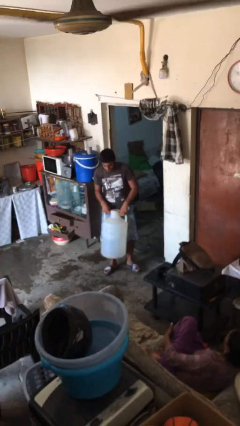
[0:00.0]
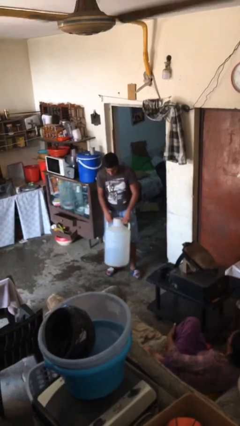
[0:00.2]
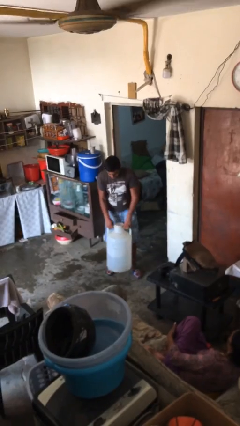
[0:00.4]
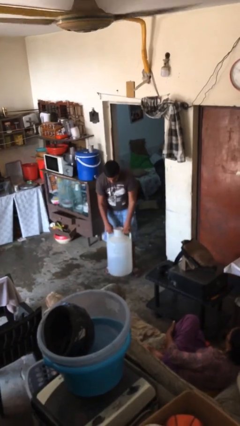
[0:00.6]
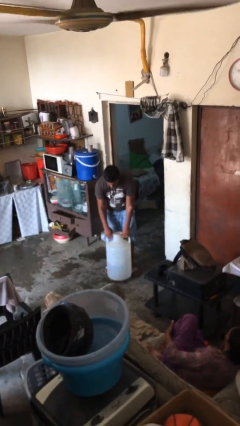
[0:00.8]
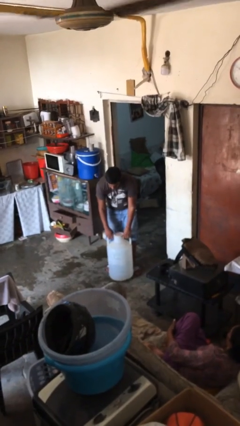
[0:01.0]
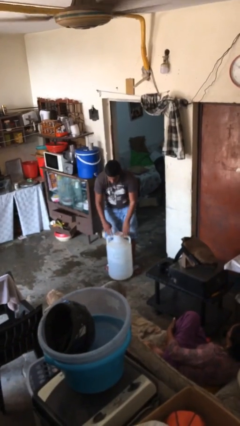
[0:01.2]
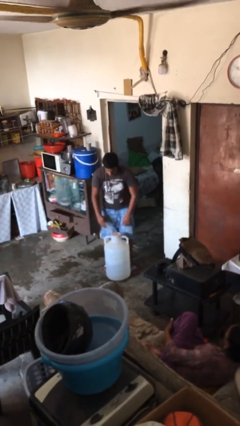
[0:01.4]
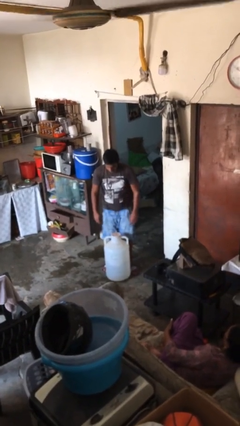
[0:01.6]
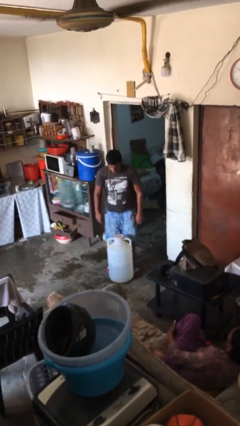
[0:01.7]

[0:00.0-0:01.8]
person puts down object on floor

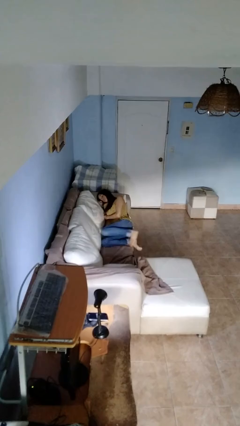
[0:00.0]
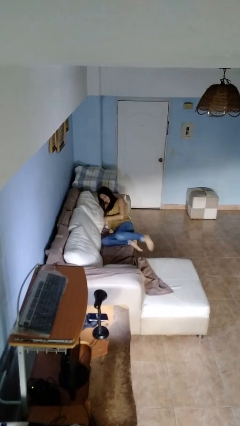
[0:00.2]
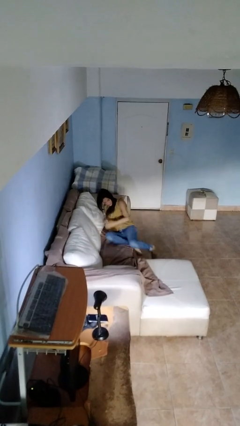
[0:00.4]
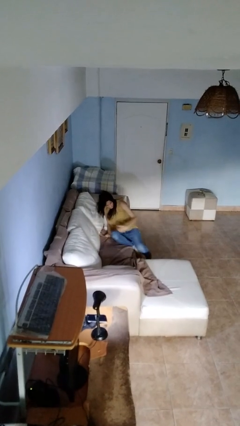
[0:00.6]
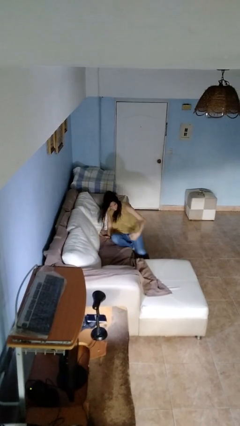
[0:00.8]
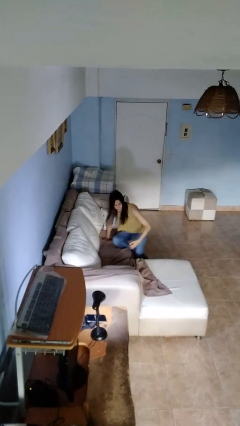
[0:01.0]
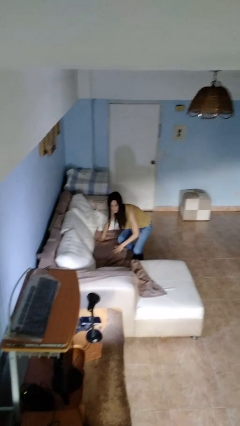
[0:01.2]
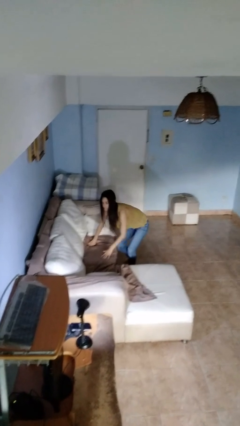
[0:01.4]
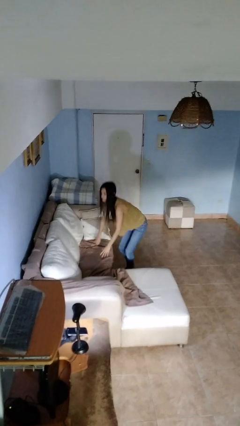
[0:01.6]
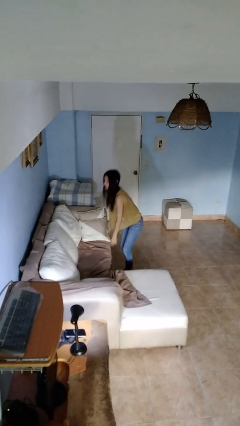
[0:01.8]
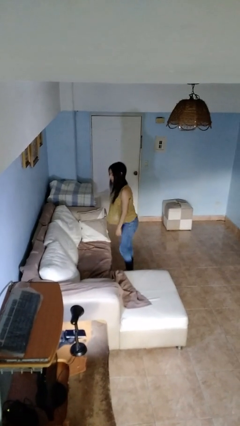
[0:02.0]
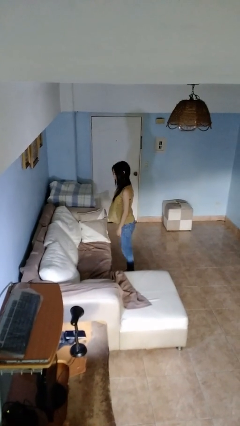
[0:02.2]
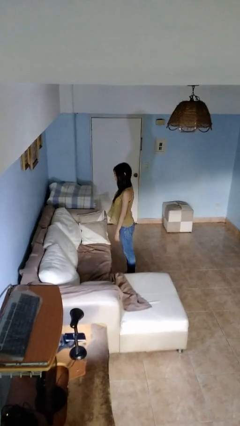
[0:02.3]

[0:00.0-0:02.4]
person stands up

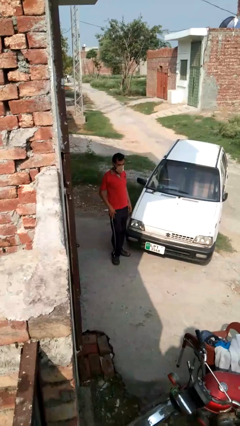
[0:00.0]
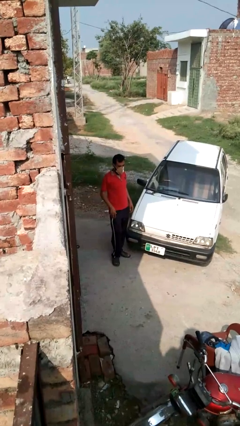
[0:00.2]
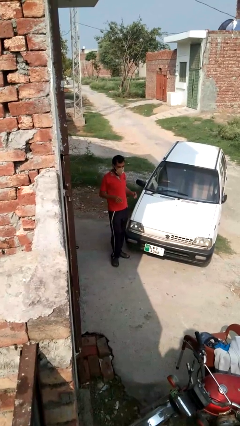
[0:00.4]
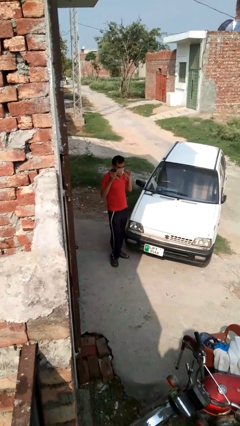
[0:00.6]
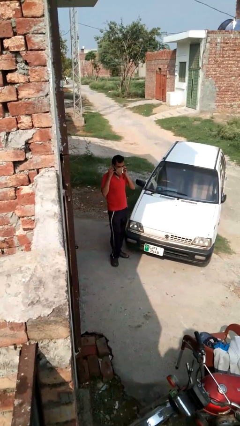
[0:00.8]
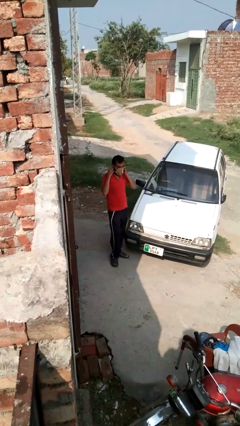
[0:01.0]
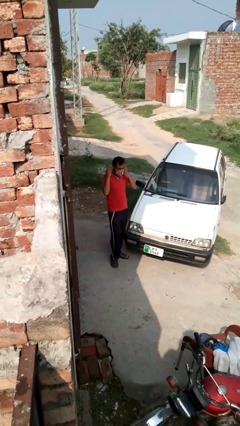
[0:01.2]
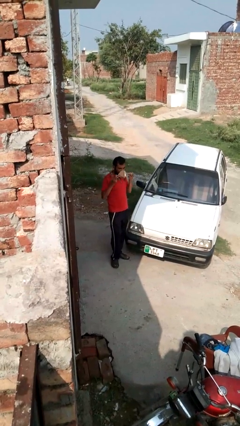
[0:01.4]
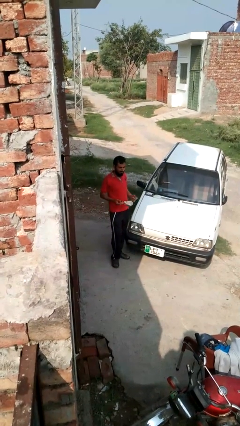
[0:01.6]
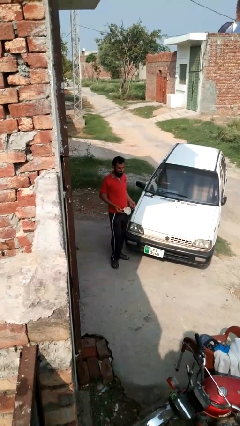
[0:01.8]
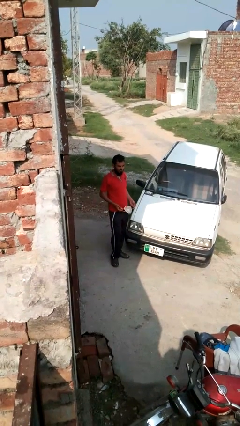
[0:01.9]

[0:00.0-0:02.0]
person takes off facemask

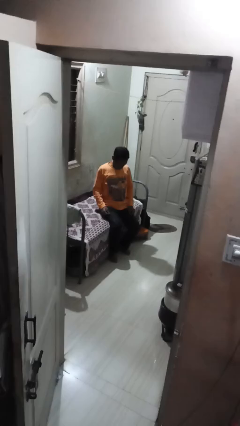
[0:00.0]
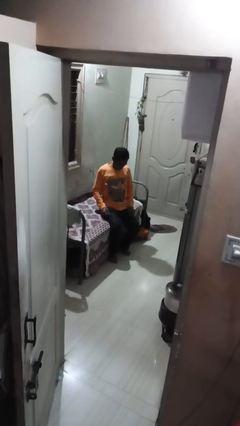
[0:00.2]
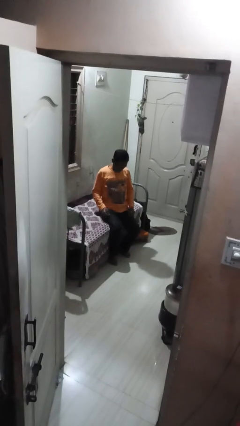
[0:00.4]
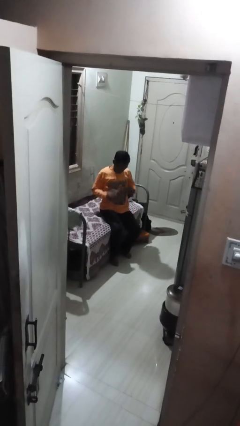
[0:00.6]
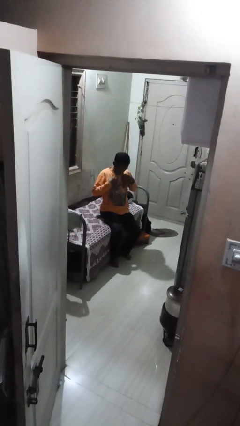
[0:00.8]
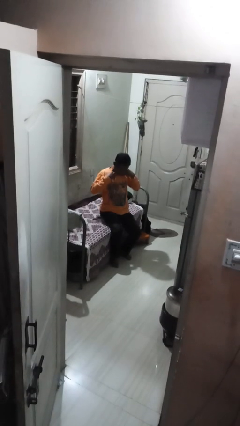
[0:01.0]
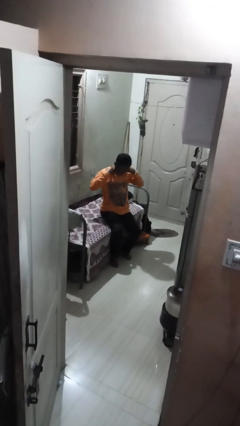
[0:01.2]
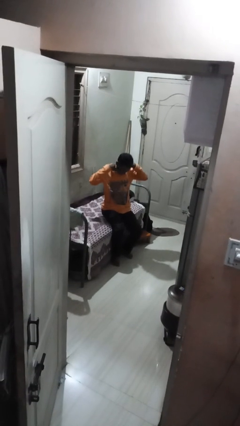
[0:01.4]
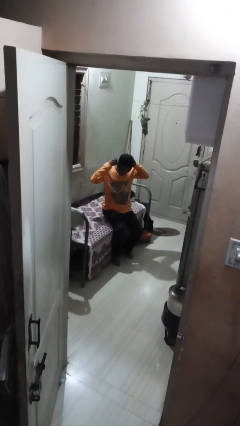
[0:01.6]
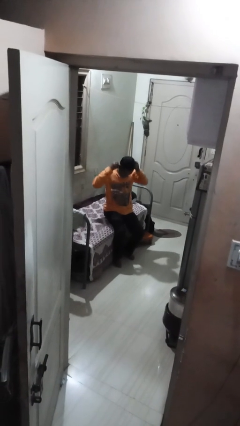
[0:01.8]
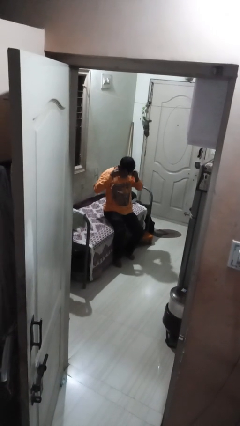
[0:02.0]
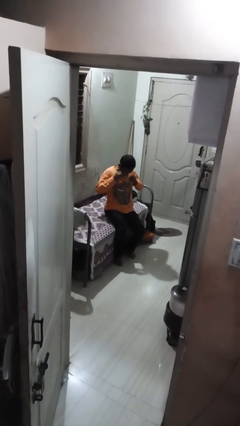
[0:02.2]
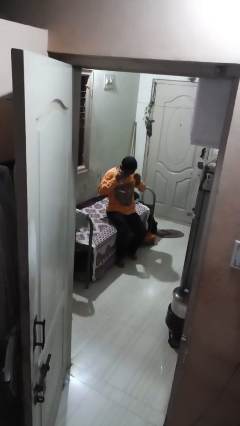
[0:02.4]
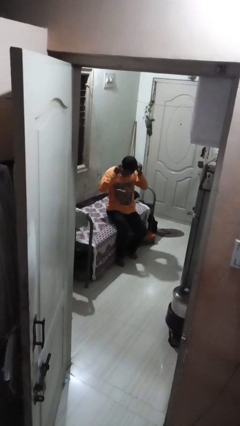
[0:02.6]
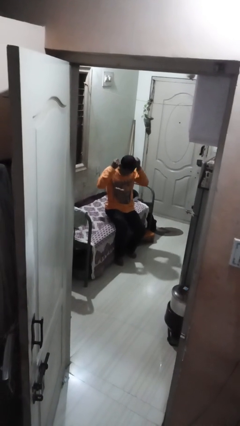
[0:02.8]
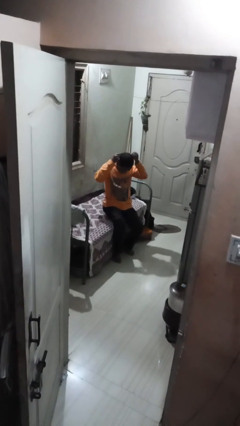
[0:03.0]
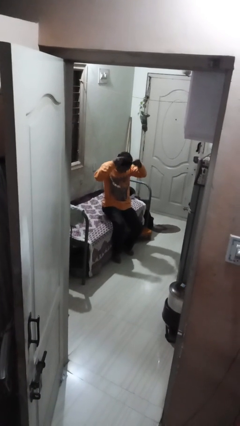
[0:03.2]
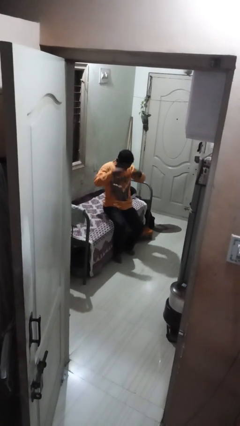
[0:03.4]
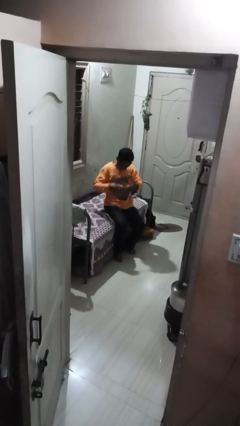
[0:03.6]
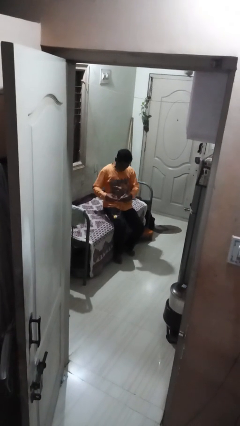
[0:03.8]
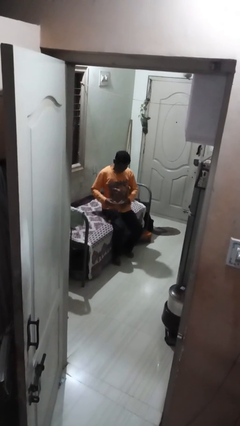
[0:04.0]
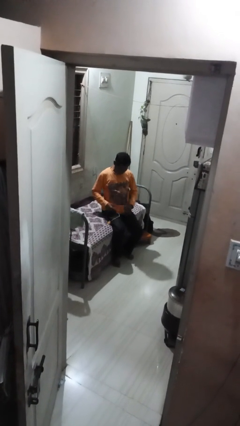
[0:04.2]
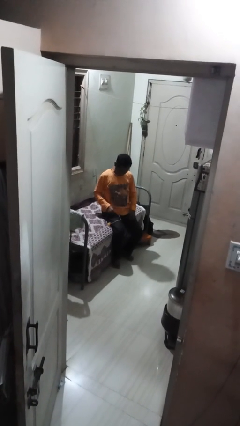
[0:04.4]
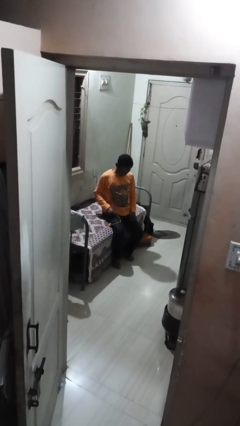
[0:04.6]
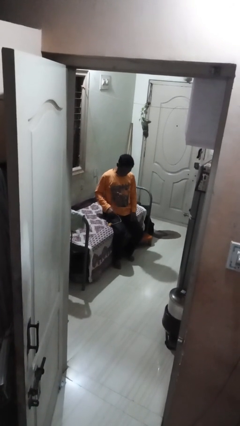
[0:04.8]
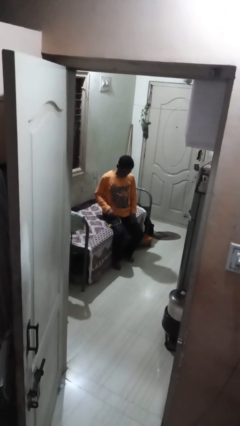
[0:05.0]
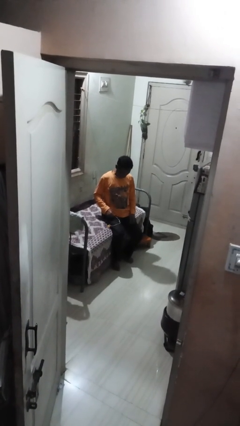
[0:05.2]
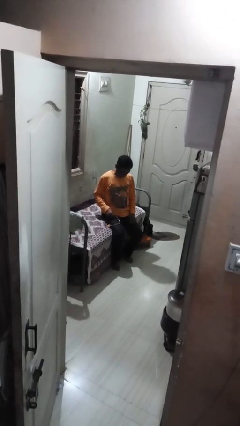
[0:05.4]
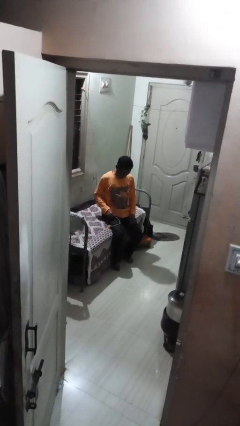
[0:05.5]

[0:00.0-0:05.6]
person takes off necklace

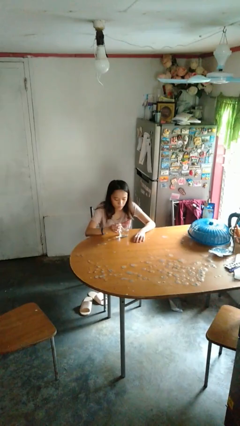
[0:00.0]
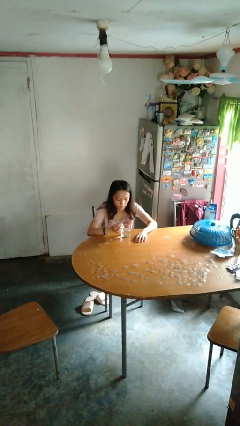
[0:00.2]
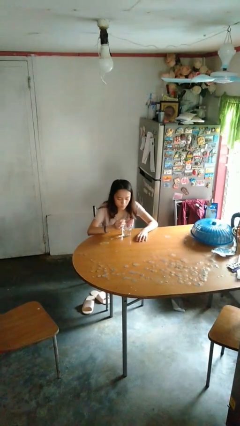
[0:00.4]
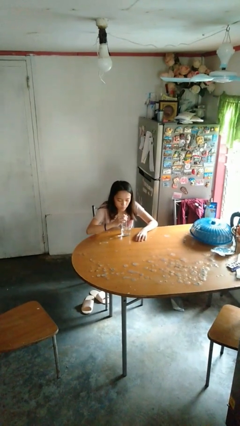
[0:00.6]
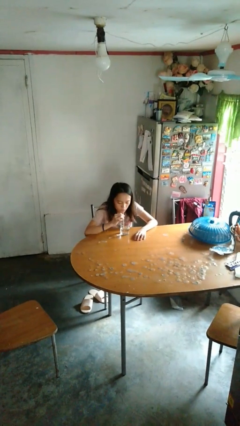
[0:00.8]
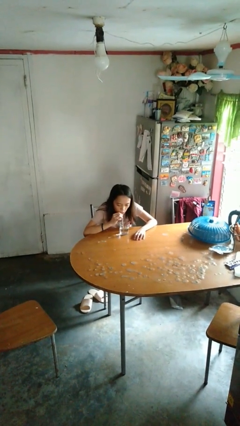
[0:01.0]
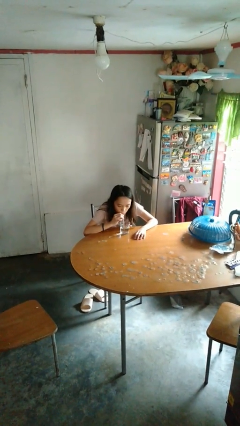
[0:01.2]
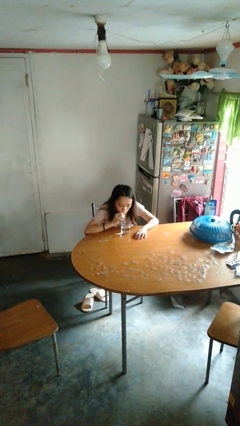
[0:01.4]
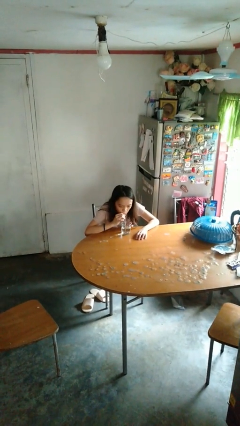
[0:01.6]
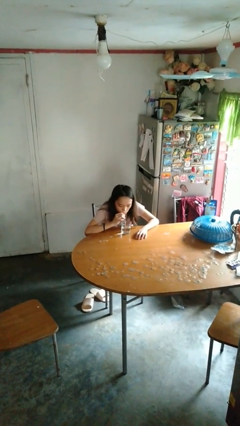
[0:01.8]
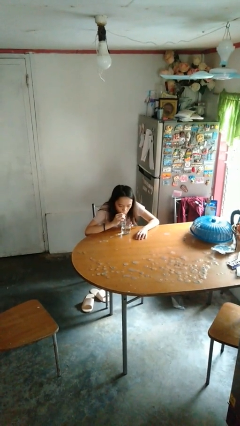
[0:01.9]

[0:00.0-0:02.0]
person drinks from straw

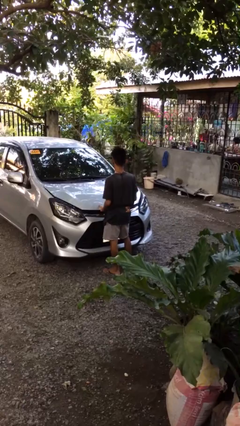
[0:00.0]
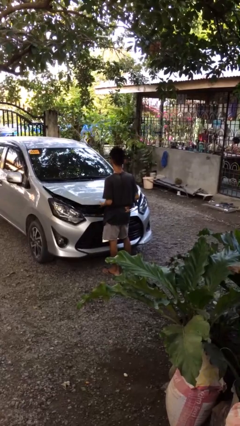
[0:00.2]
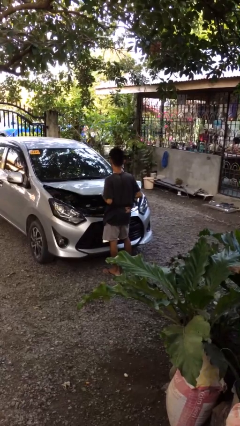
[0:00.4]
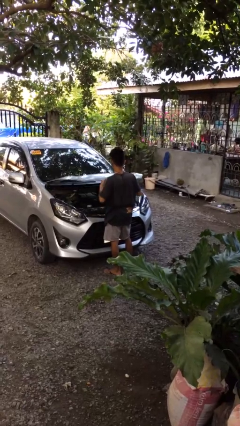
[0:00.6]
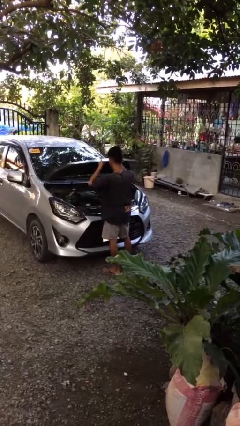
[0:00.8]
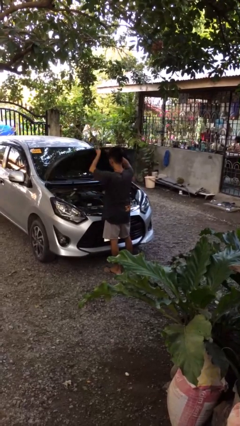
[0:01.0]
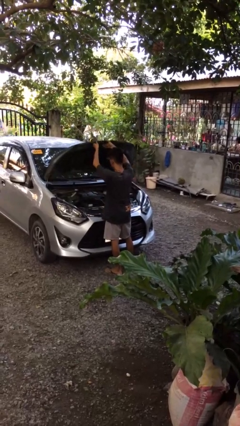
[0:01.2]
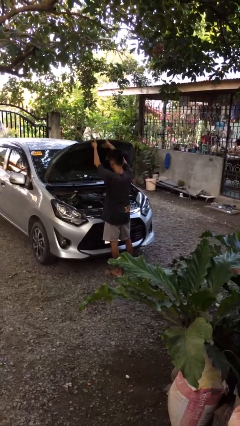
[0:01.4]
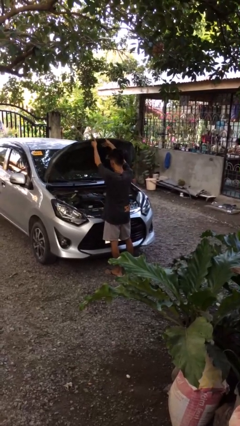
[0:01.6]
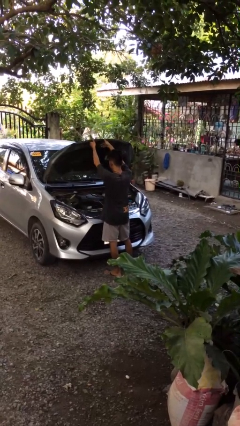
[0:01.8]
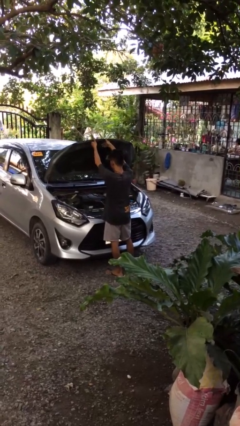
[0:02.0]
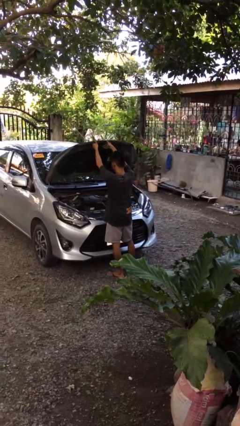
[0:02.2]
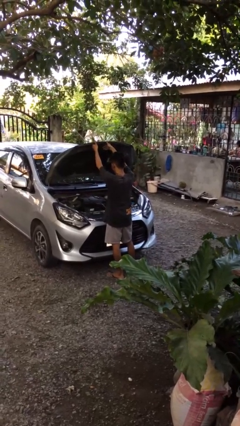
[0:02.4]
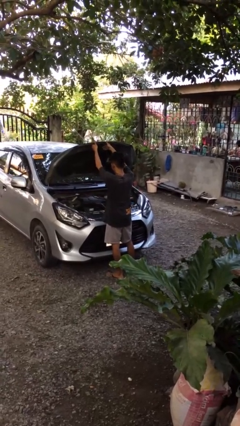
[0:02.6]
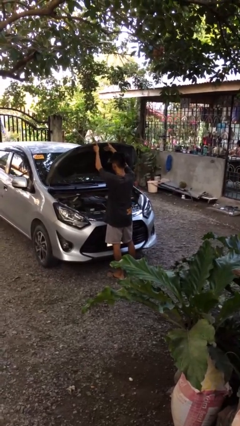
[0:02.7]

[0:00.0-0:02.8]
person opens car hood

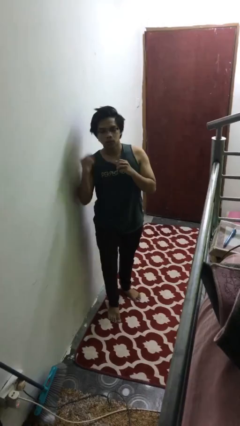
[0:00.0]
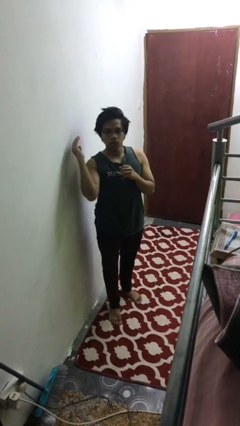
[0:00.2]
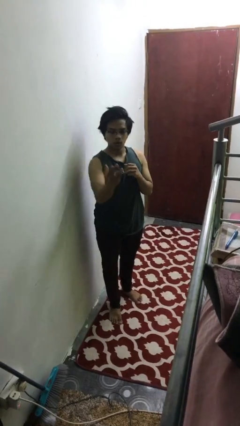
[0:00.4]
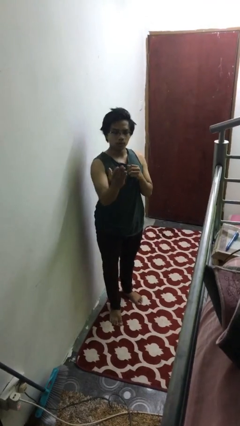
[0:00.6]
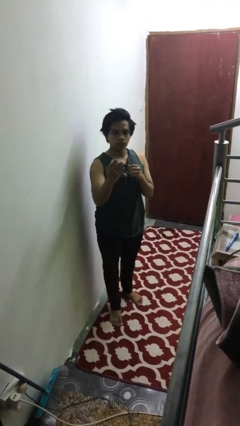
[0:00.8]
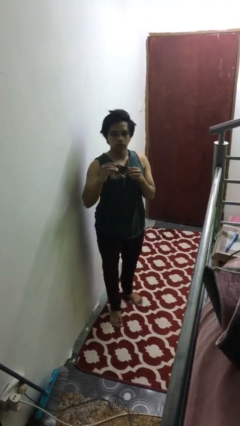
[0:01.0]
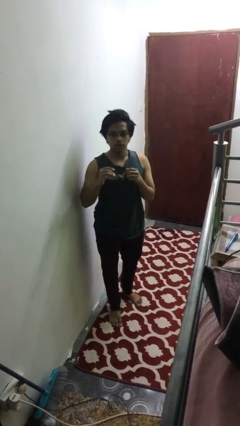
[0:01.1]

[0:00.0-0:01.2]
person karate chop
